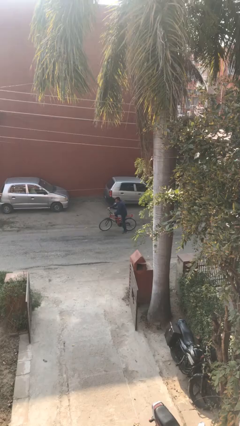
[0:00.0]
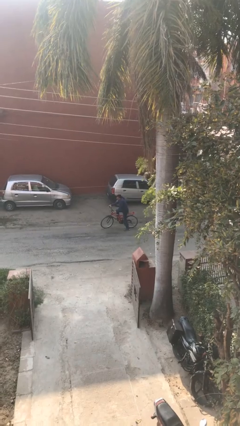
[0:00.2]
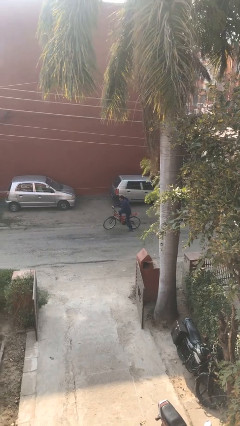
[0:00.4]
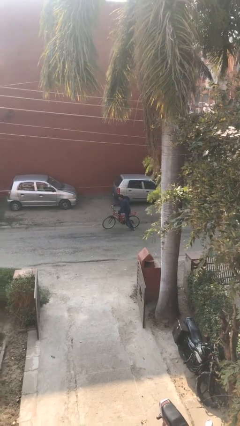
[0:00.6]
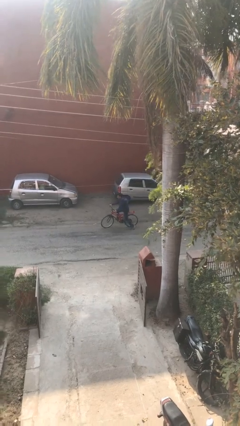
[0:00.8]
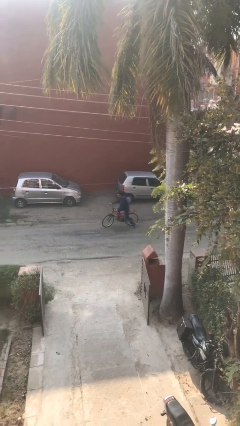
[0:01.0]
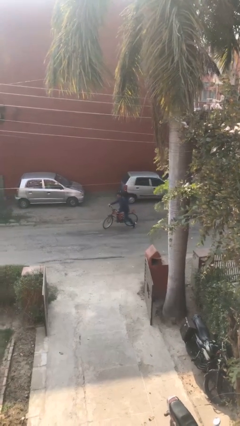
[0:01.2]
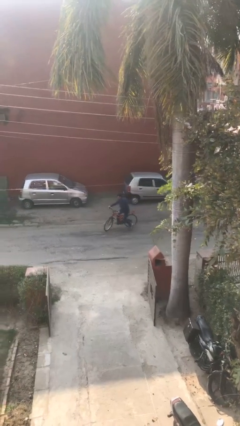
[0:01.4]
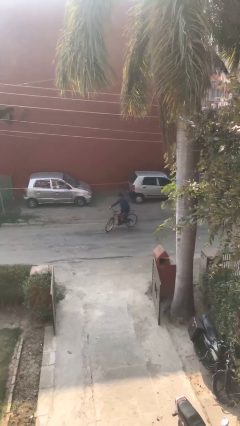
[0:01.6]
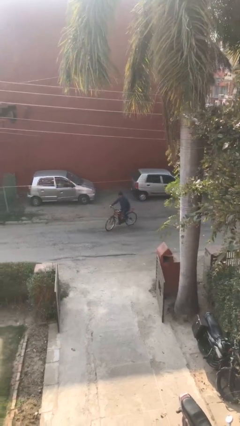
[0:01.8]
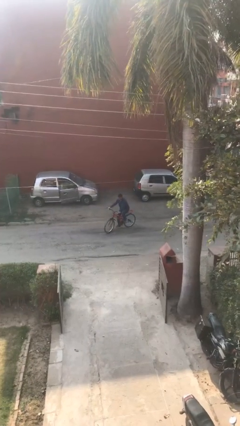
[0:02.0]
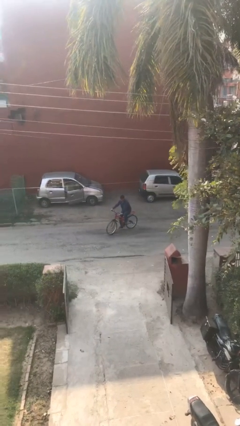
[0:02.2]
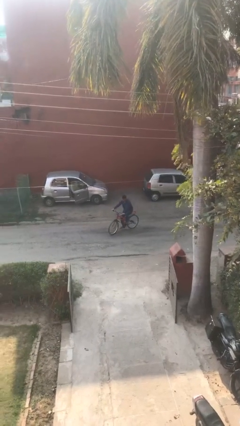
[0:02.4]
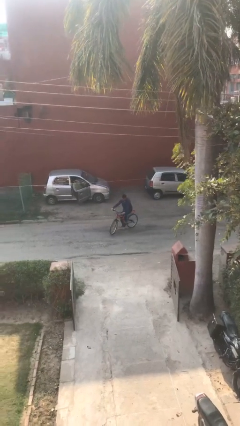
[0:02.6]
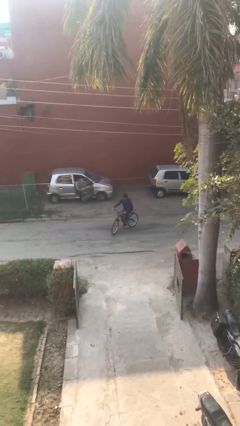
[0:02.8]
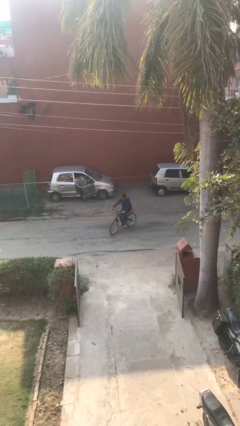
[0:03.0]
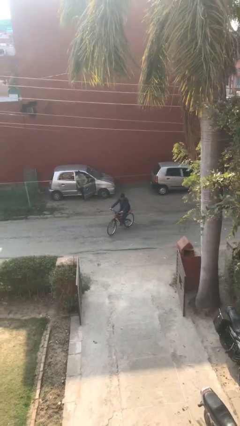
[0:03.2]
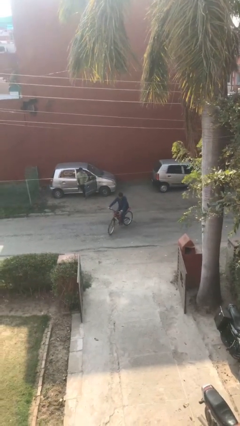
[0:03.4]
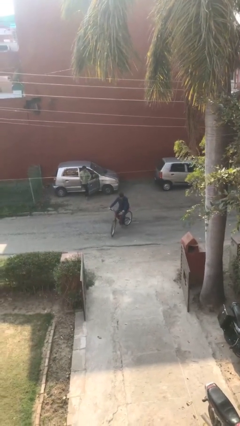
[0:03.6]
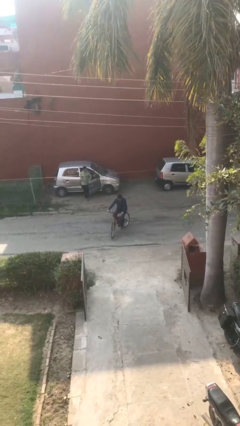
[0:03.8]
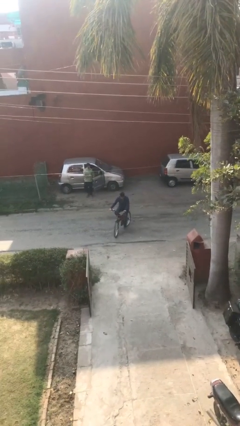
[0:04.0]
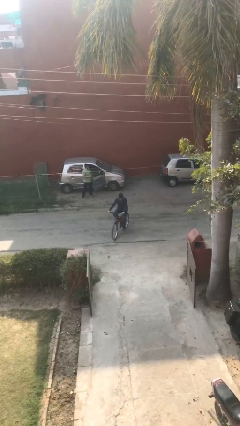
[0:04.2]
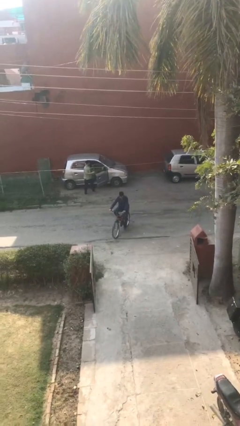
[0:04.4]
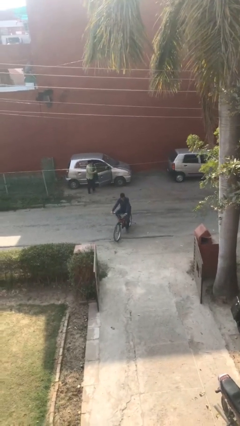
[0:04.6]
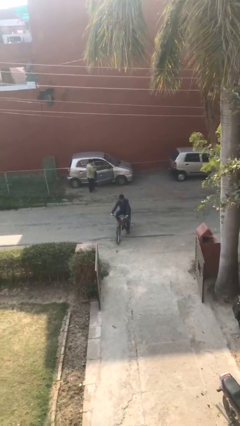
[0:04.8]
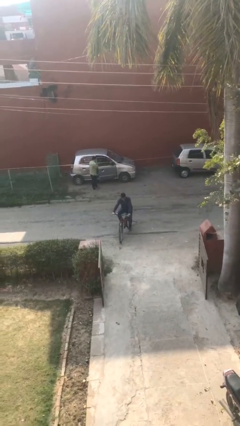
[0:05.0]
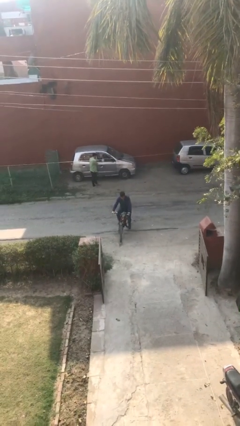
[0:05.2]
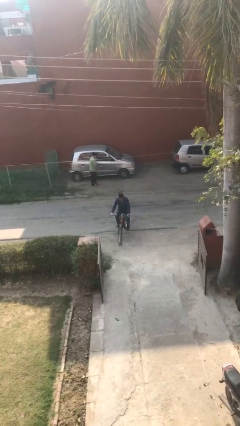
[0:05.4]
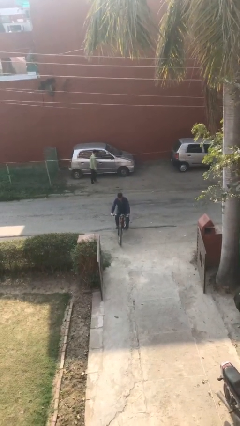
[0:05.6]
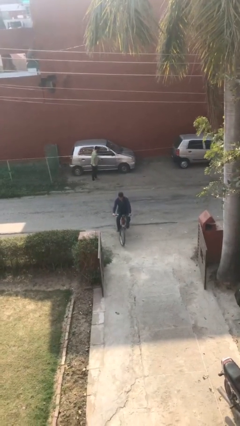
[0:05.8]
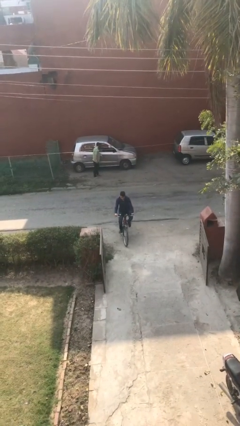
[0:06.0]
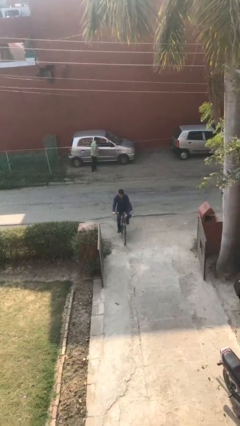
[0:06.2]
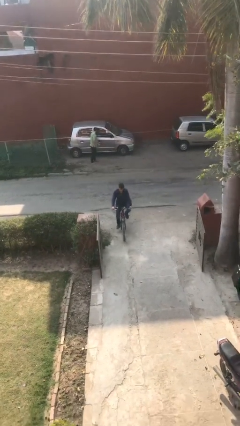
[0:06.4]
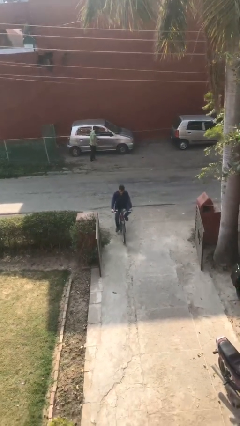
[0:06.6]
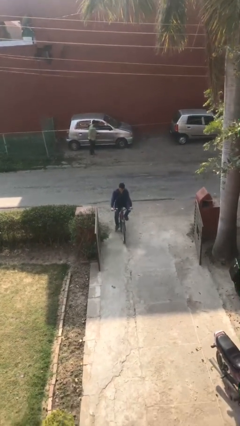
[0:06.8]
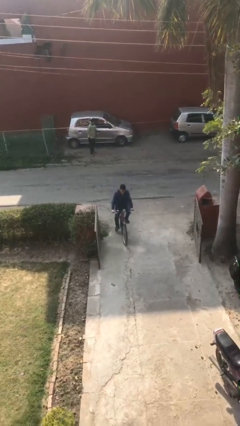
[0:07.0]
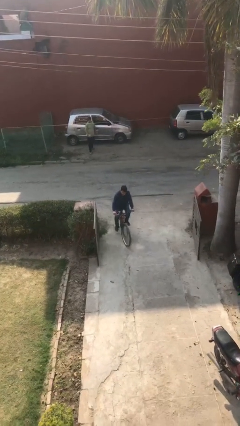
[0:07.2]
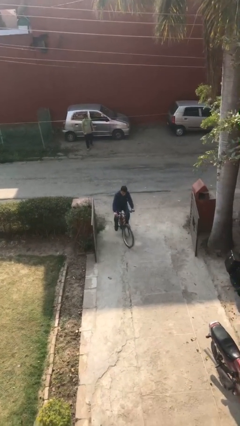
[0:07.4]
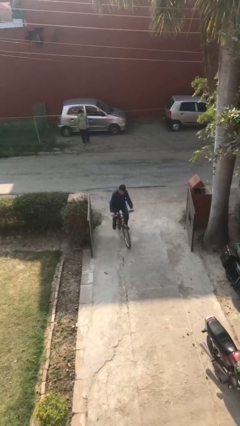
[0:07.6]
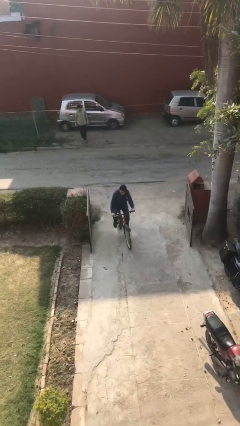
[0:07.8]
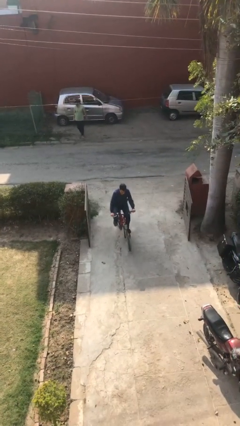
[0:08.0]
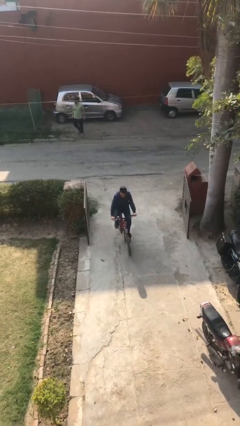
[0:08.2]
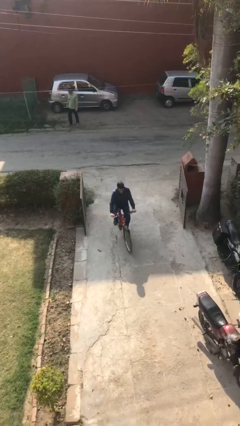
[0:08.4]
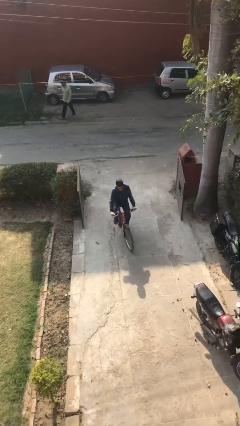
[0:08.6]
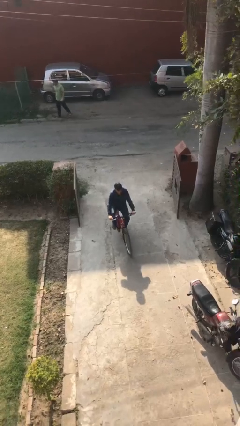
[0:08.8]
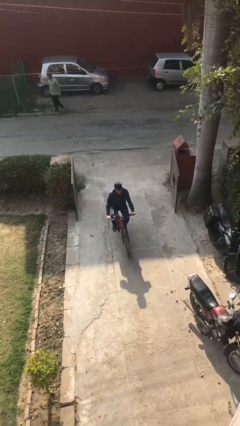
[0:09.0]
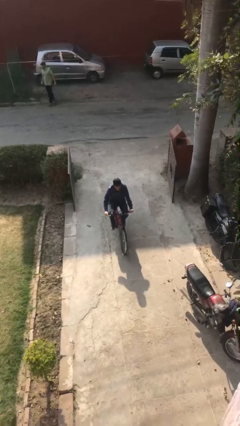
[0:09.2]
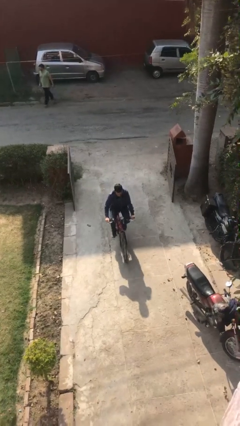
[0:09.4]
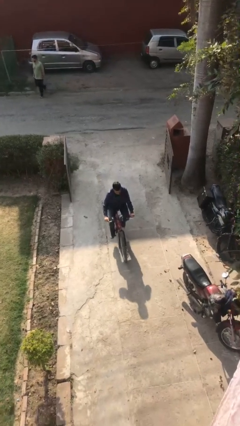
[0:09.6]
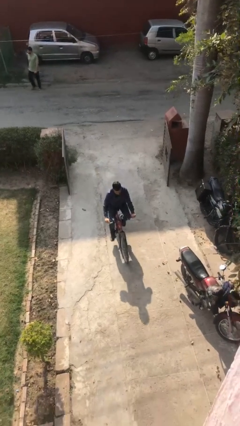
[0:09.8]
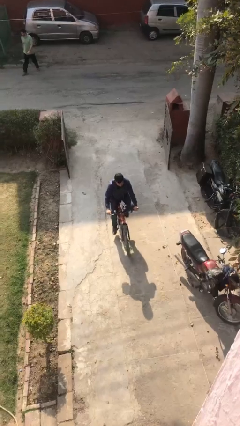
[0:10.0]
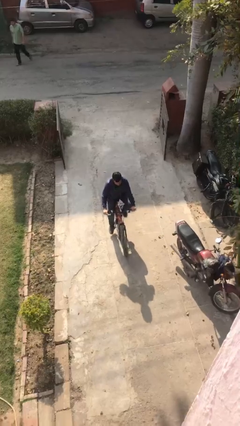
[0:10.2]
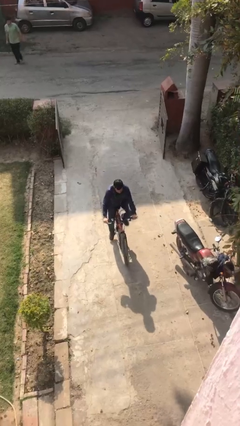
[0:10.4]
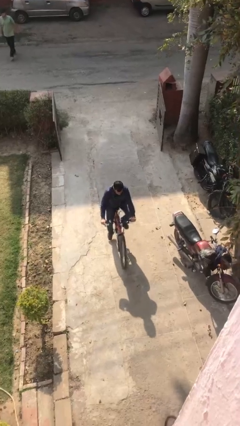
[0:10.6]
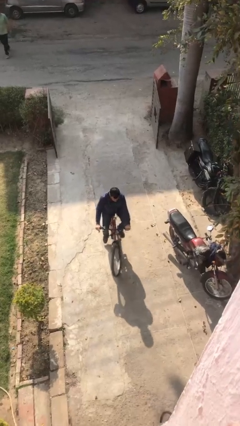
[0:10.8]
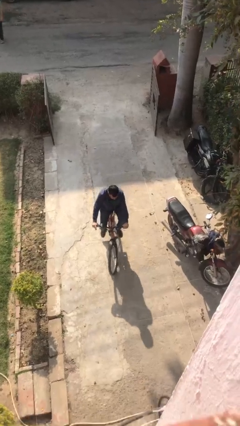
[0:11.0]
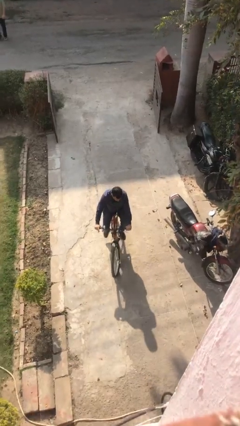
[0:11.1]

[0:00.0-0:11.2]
person rides bicycle

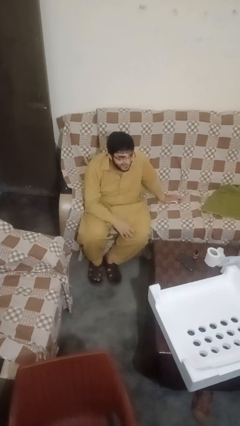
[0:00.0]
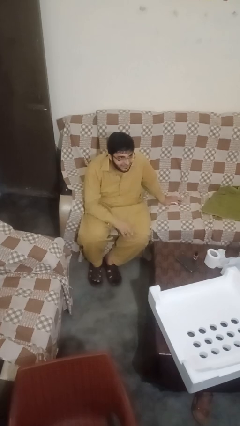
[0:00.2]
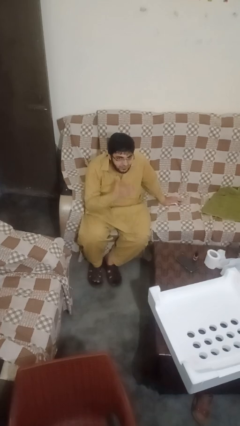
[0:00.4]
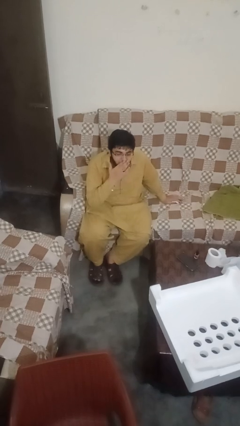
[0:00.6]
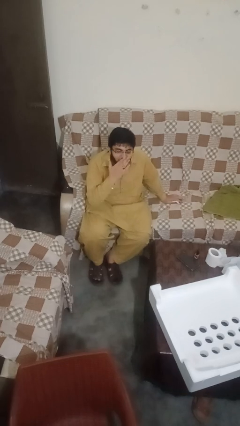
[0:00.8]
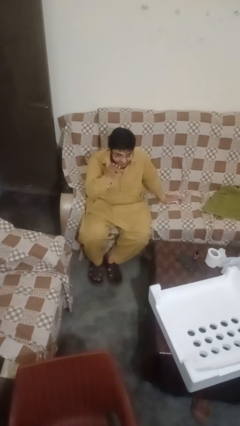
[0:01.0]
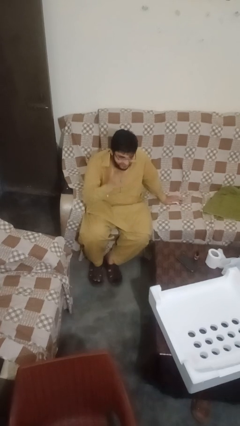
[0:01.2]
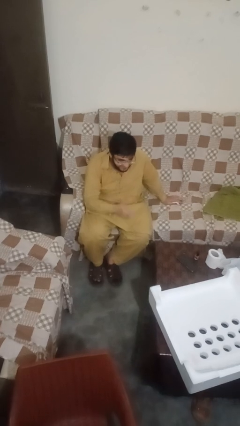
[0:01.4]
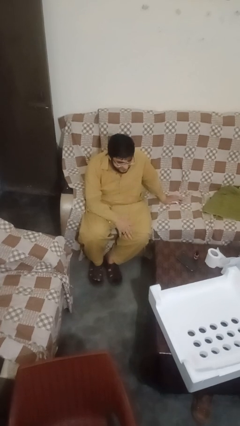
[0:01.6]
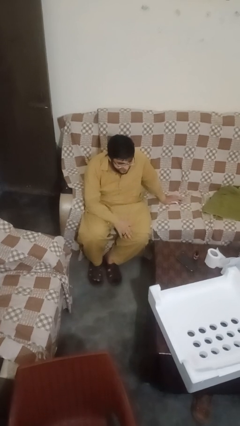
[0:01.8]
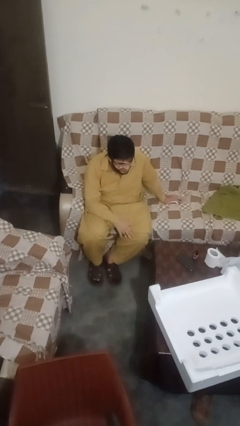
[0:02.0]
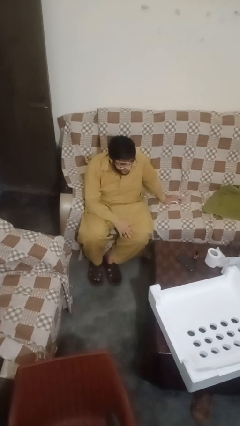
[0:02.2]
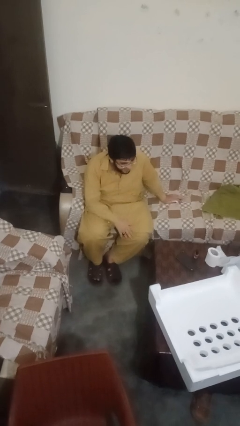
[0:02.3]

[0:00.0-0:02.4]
person gestures blow kiss

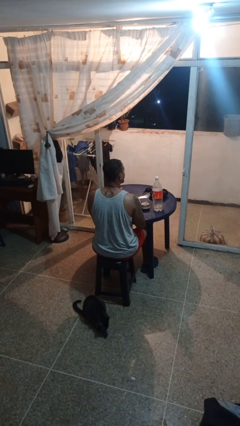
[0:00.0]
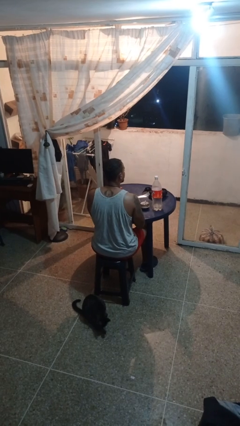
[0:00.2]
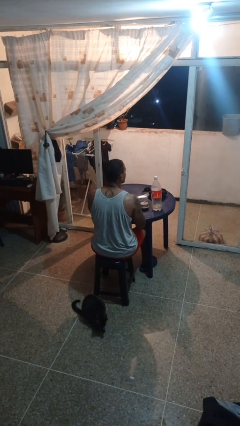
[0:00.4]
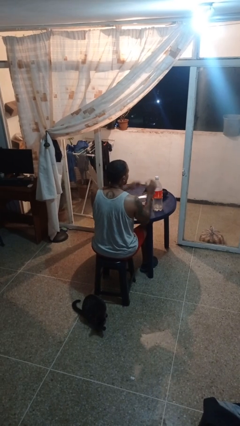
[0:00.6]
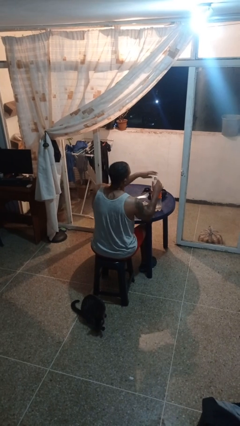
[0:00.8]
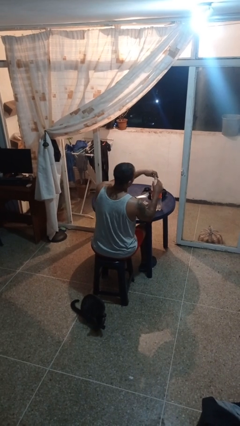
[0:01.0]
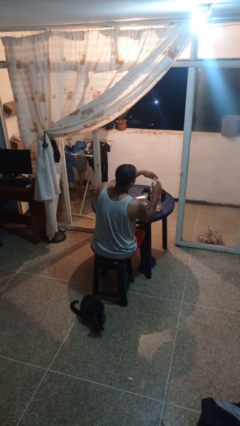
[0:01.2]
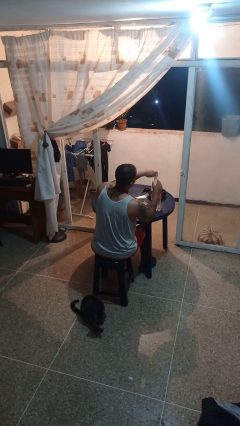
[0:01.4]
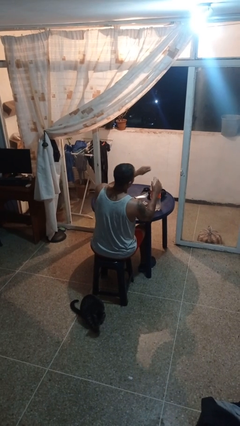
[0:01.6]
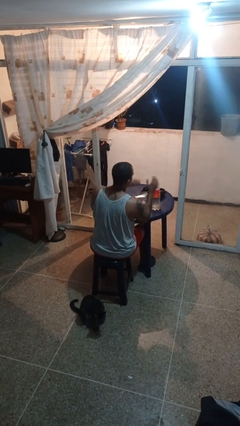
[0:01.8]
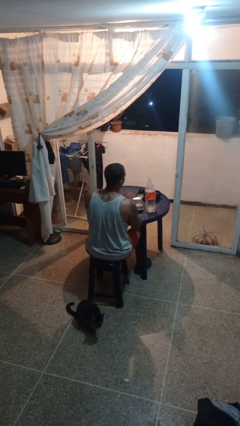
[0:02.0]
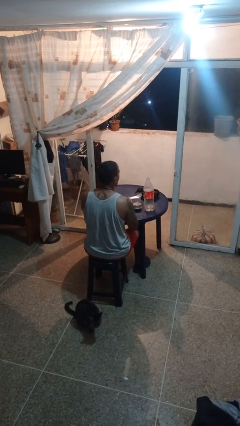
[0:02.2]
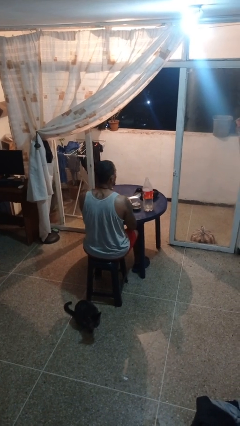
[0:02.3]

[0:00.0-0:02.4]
person unscrews lid from bottle

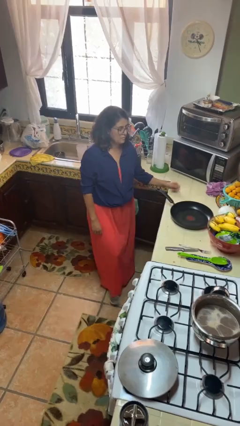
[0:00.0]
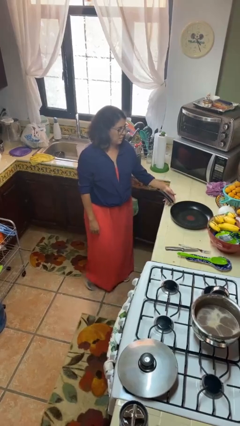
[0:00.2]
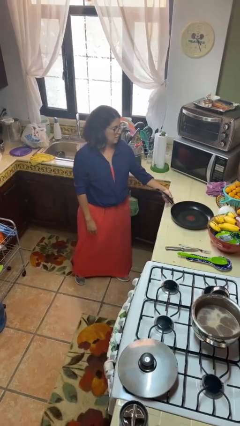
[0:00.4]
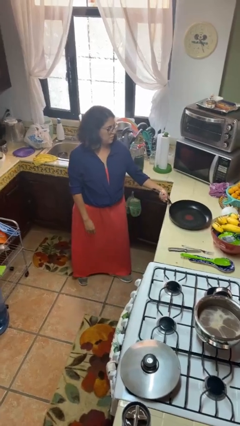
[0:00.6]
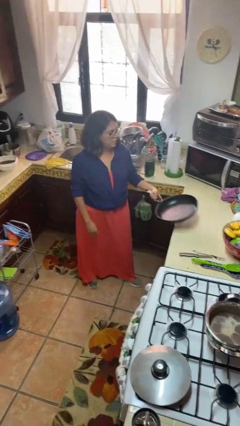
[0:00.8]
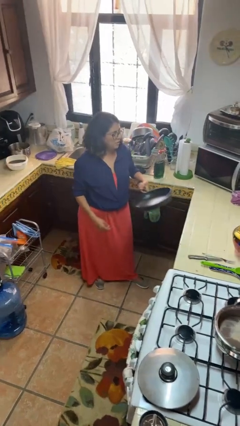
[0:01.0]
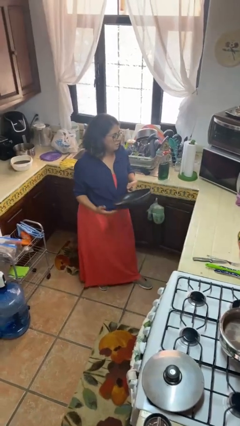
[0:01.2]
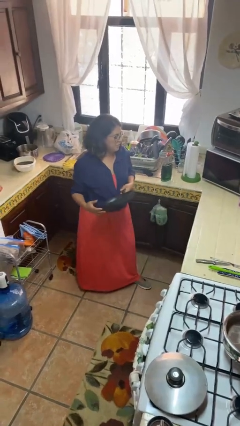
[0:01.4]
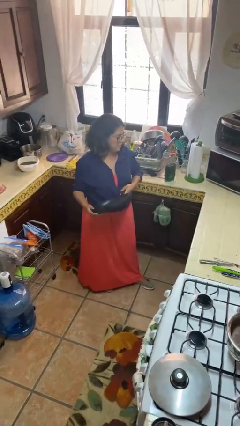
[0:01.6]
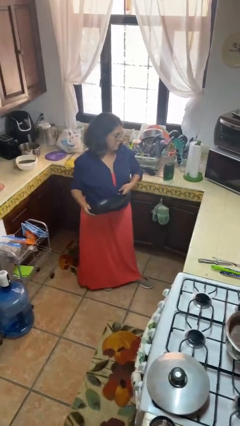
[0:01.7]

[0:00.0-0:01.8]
person picks up object from countertop
